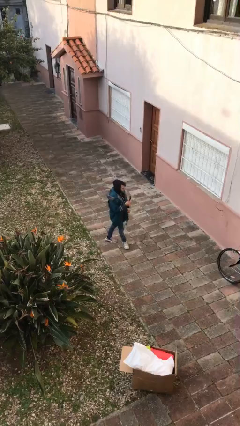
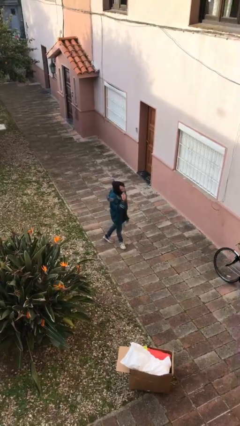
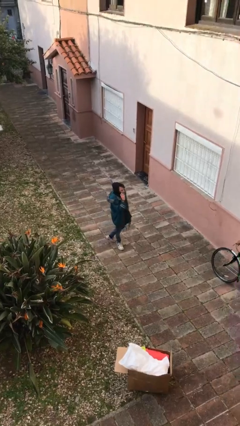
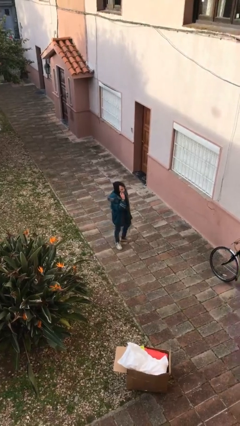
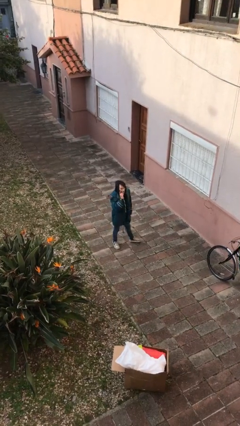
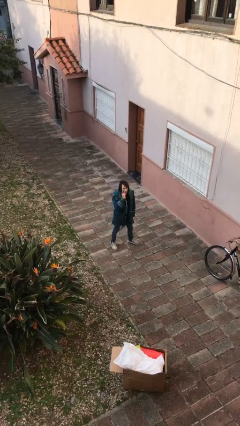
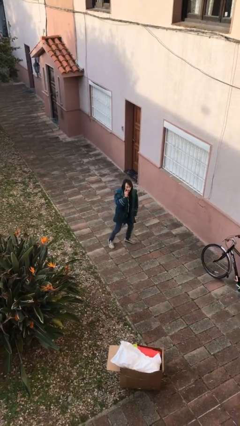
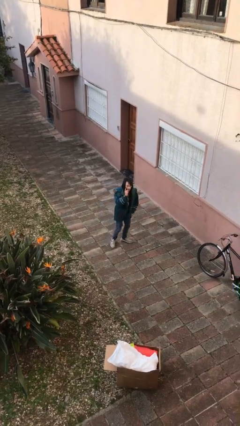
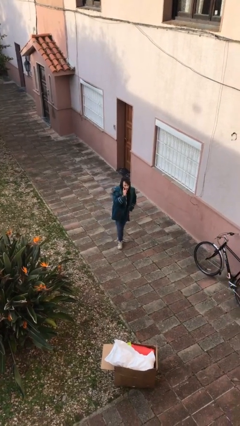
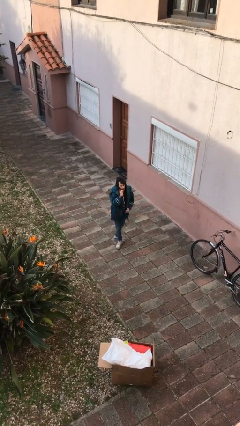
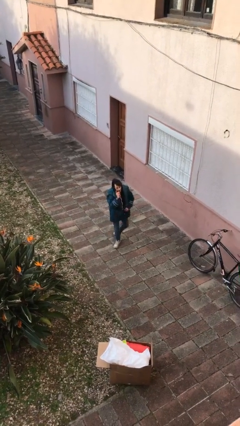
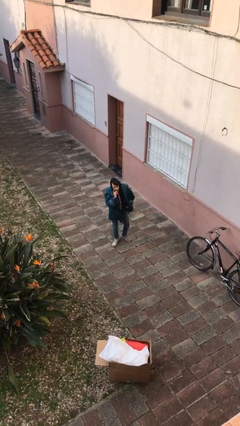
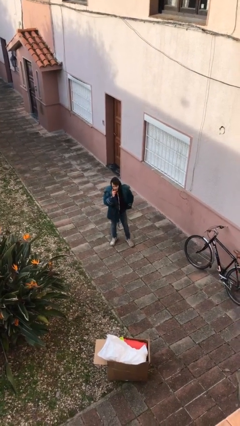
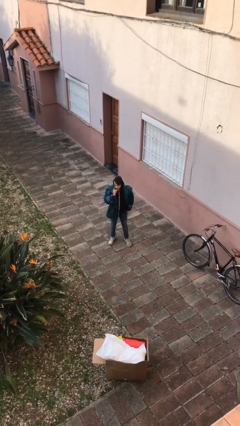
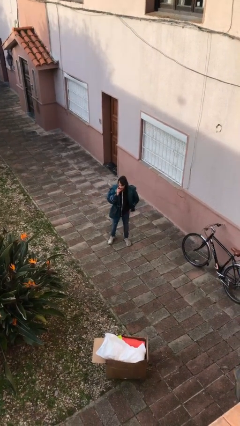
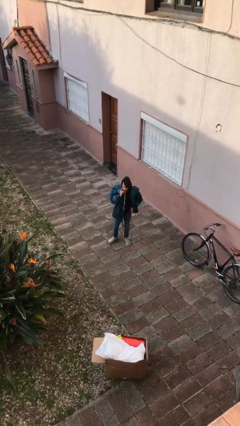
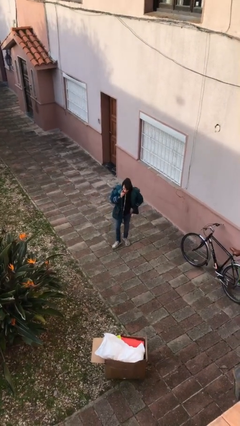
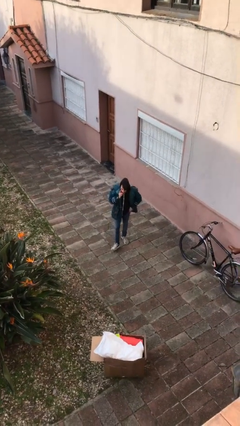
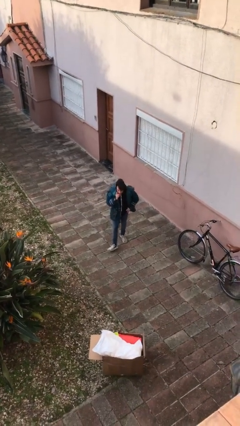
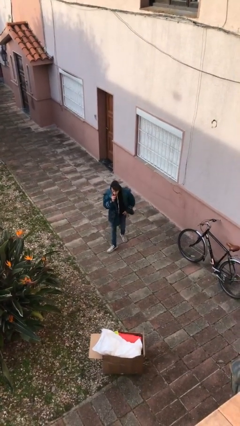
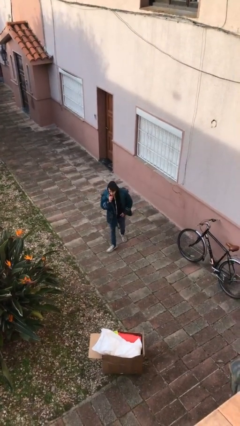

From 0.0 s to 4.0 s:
person talks on phone

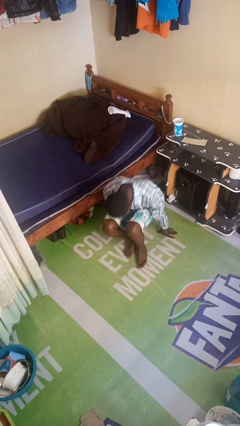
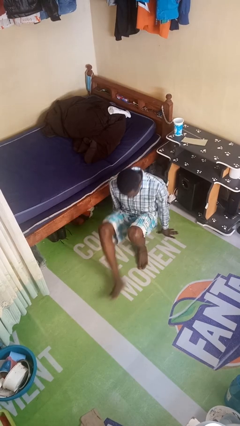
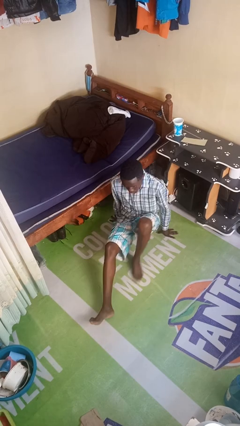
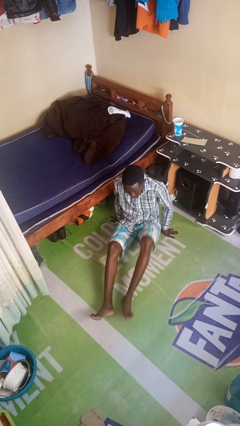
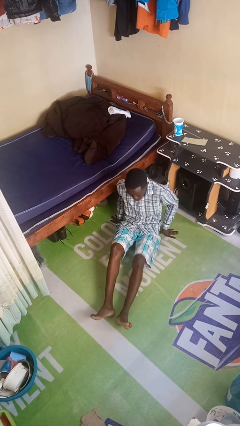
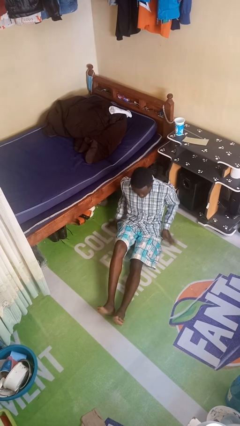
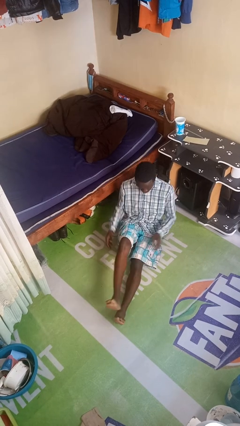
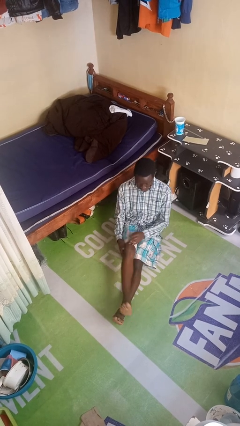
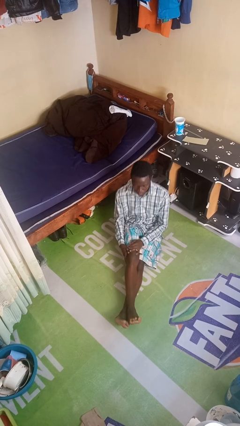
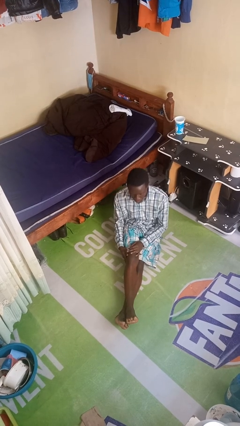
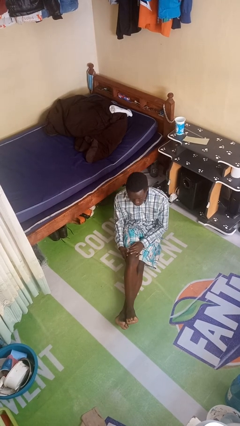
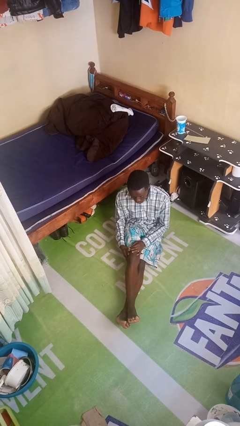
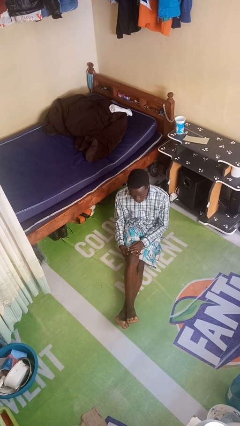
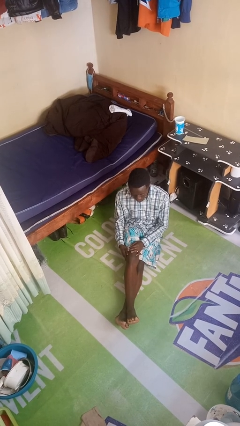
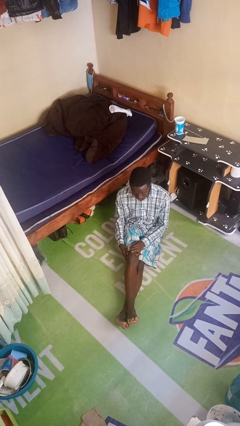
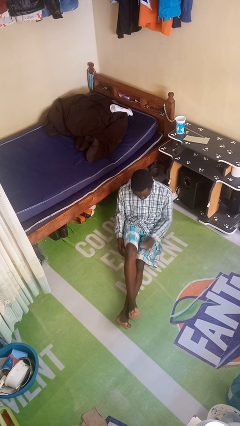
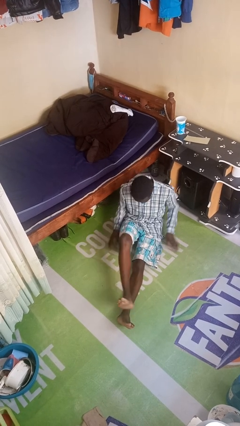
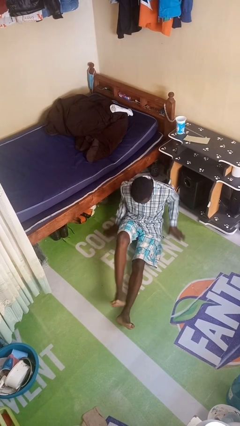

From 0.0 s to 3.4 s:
person sits crisscross

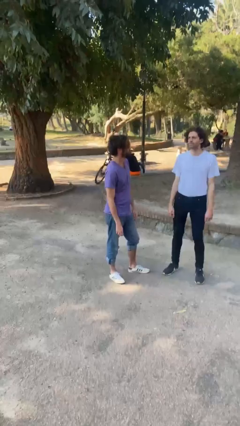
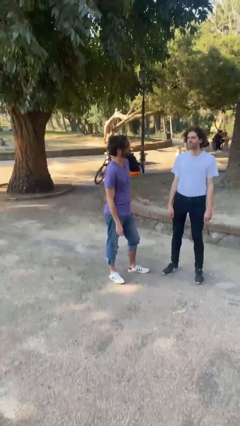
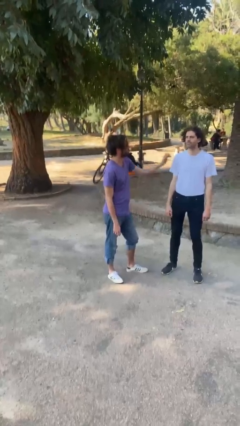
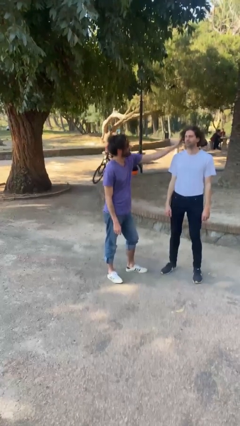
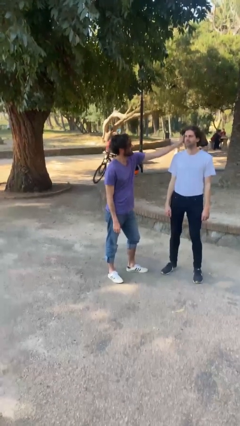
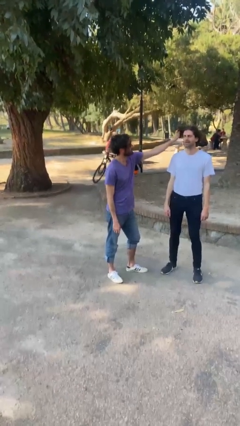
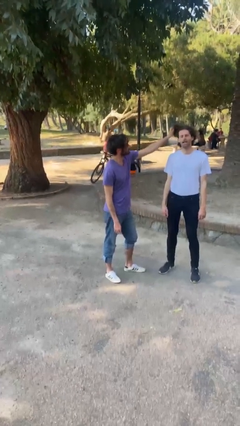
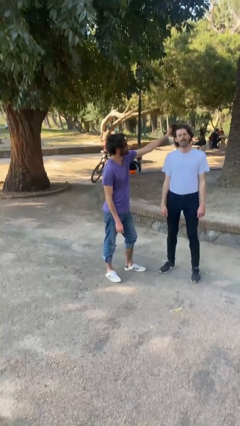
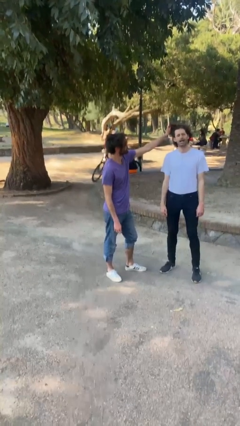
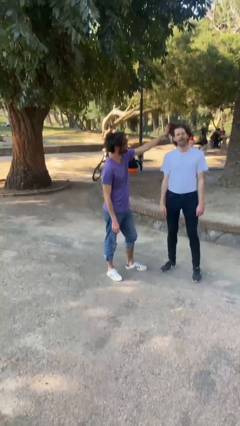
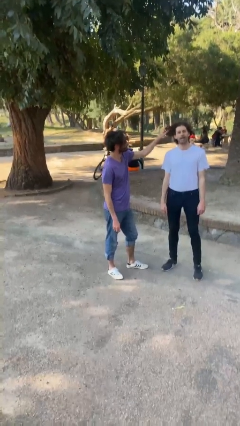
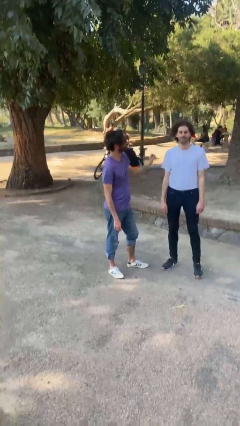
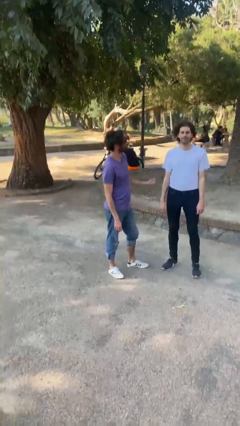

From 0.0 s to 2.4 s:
person grabs person by hair

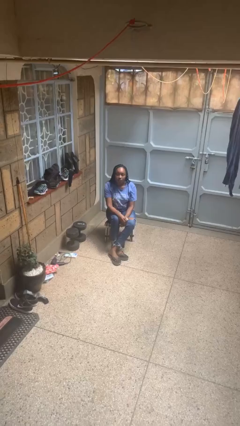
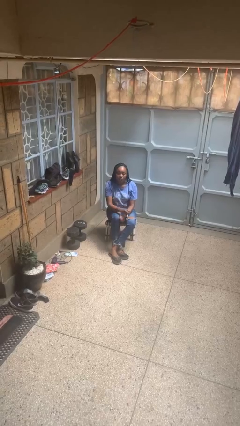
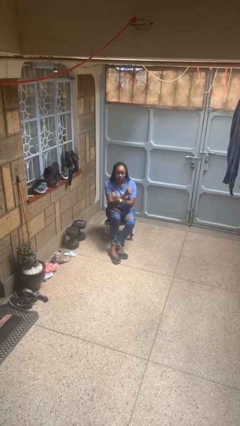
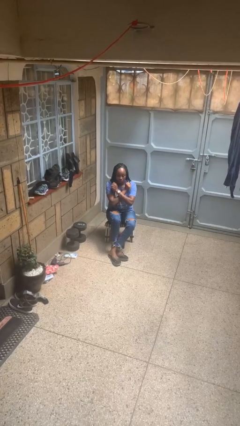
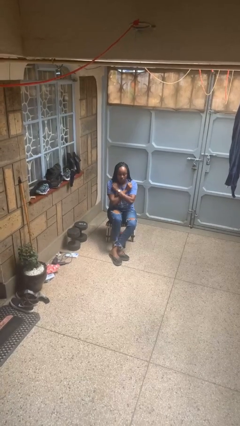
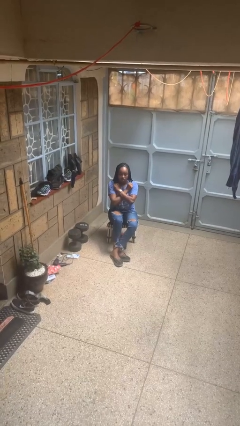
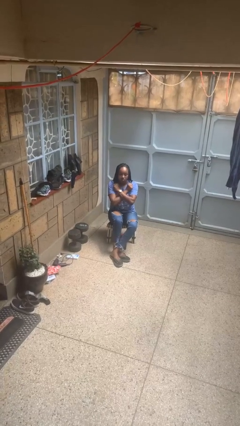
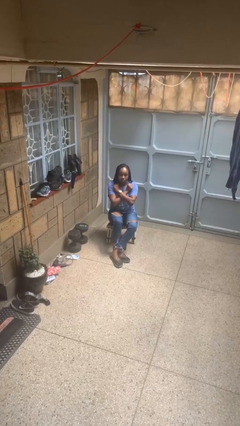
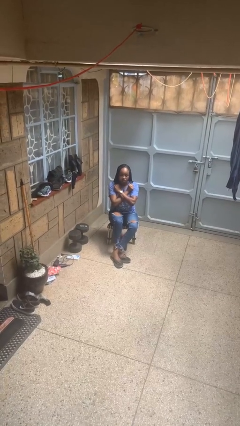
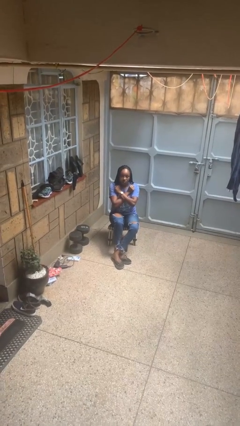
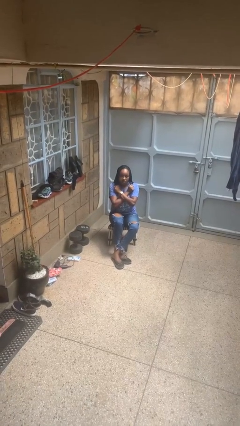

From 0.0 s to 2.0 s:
person gestures arms x

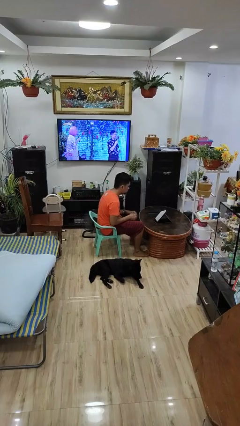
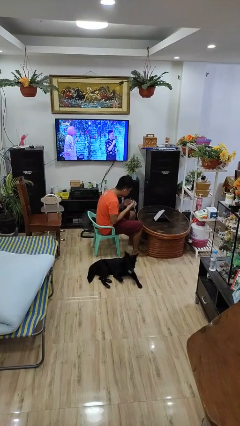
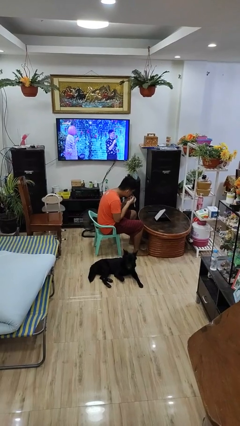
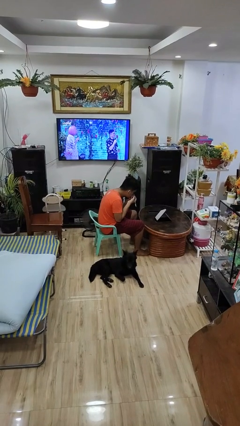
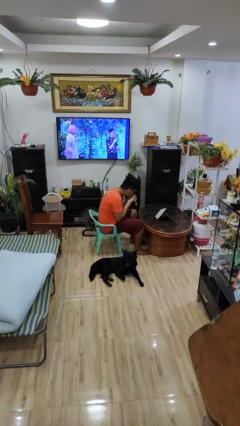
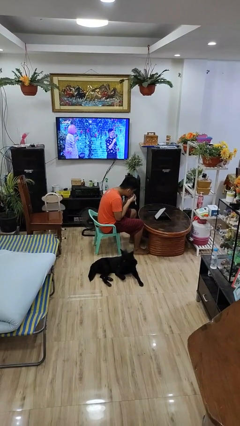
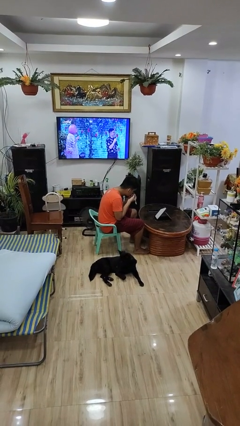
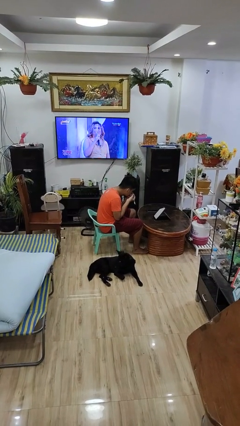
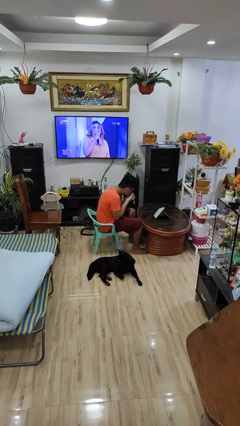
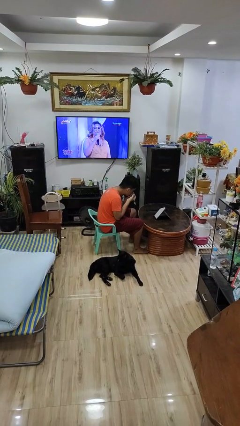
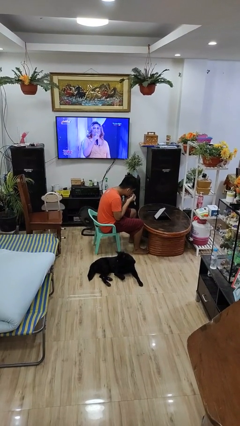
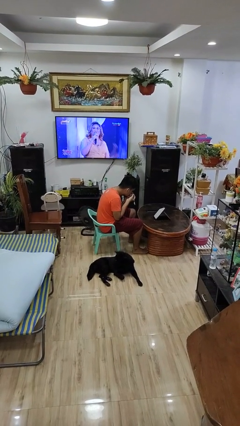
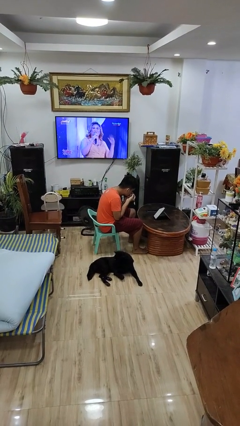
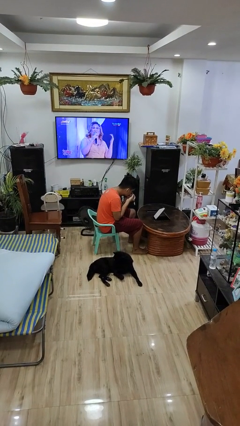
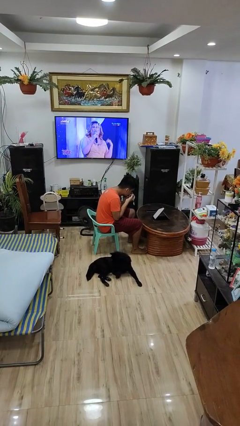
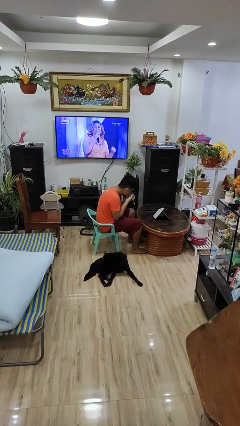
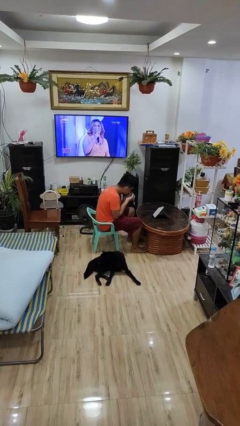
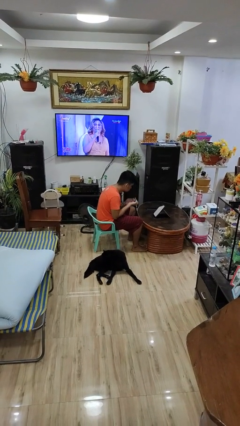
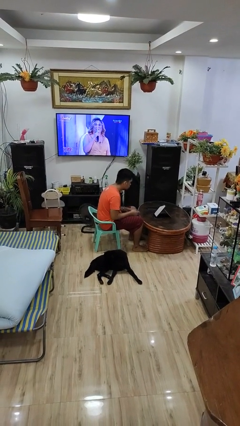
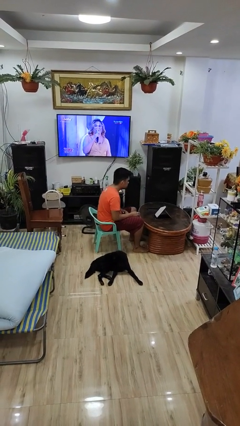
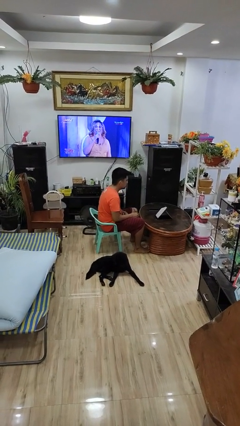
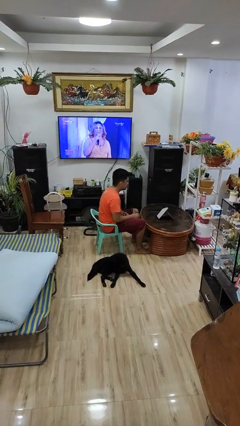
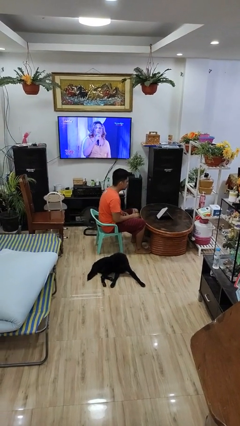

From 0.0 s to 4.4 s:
person applies eye makeup

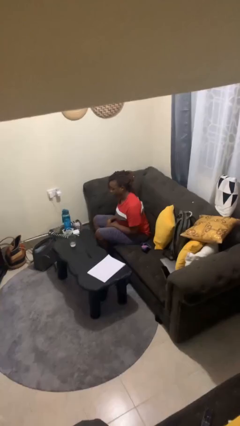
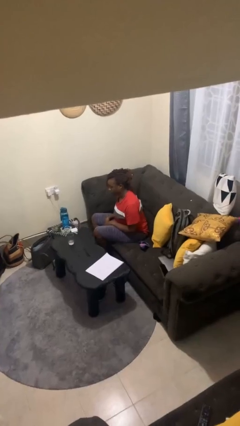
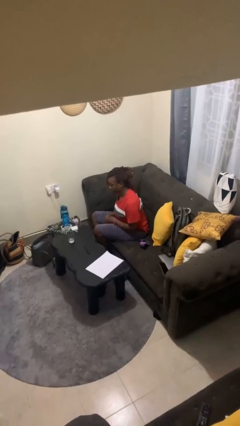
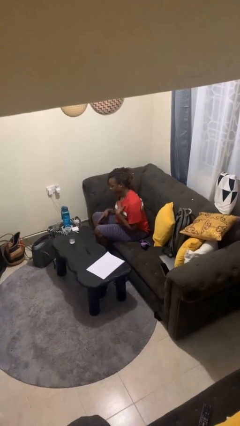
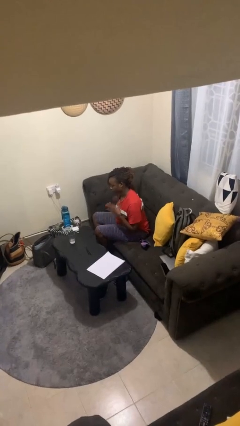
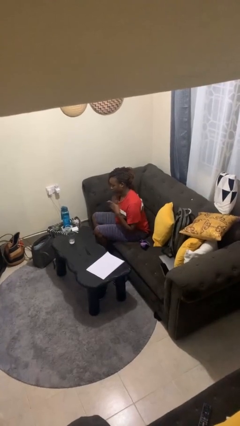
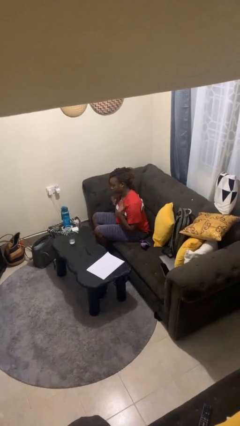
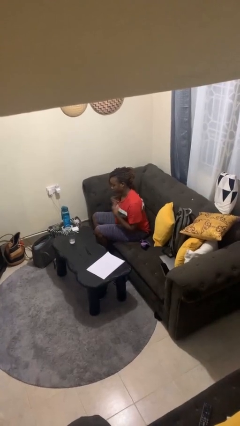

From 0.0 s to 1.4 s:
person drums on chest
